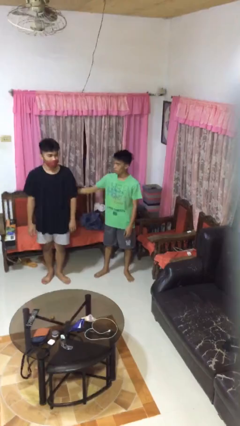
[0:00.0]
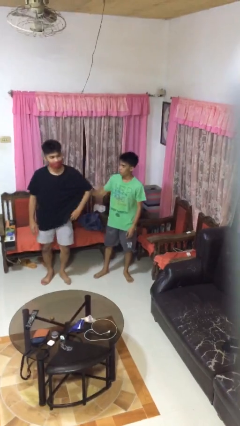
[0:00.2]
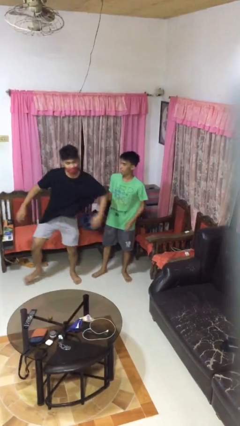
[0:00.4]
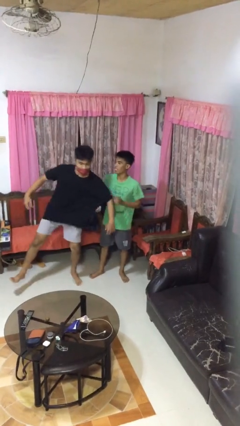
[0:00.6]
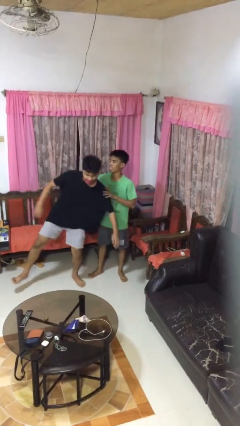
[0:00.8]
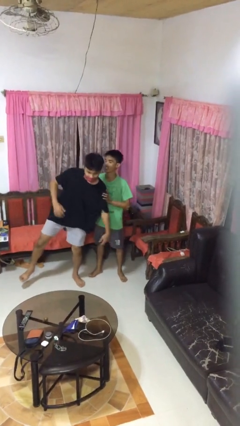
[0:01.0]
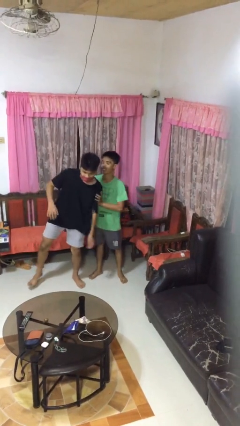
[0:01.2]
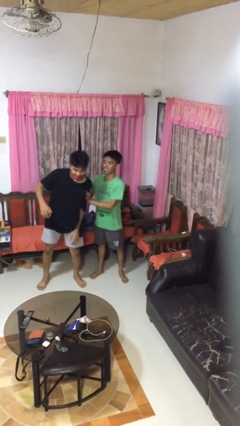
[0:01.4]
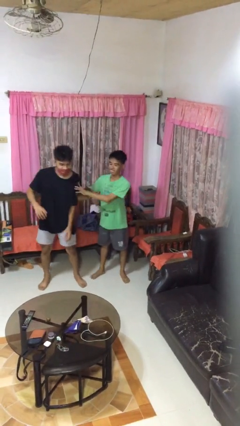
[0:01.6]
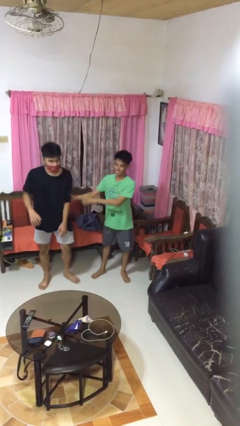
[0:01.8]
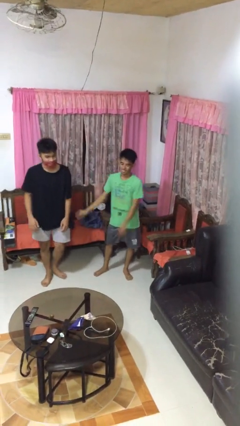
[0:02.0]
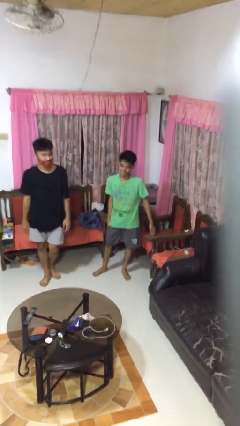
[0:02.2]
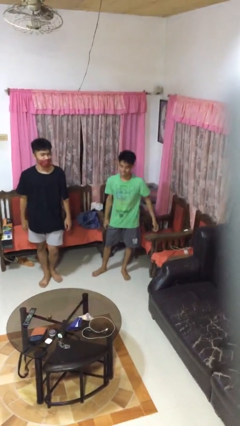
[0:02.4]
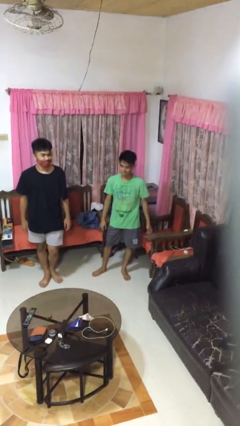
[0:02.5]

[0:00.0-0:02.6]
person grabs person by bicep

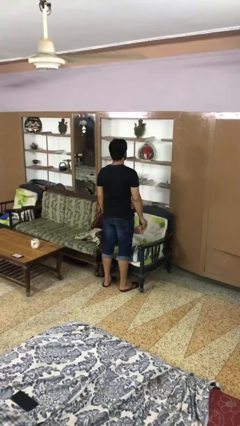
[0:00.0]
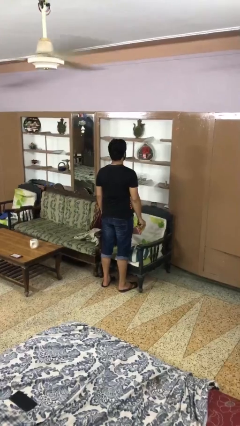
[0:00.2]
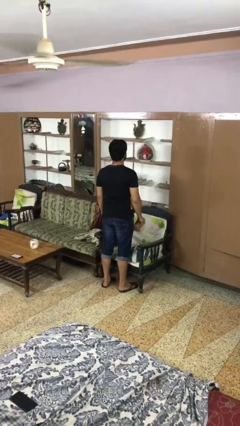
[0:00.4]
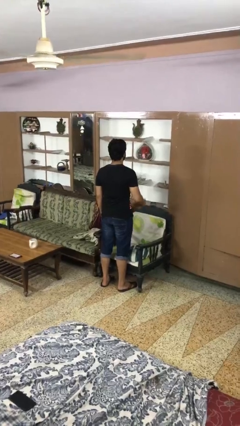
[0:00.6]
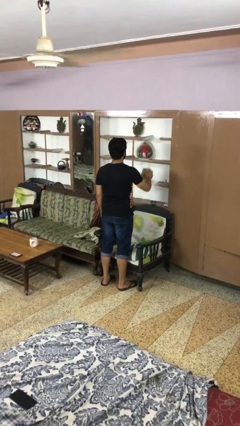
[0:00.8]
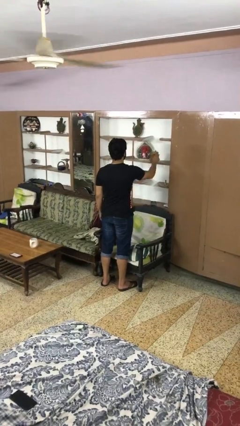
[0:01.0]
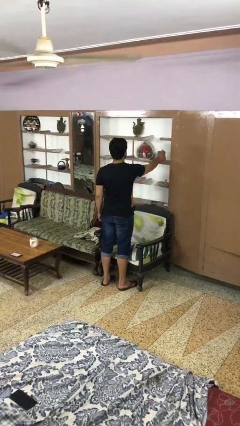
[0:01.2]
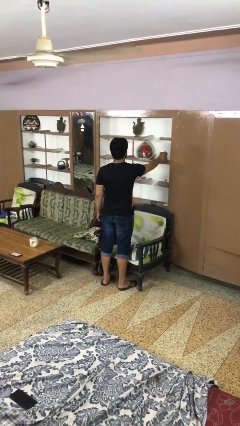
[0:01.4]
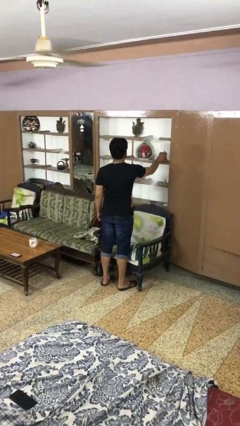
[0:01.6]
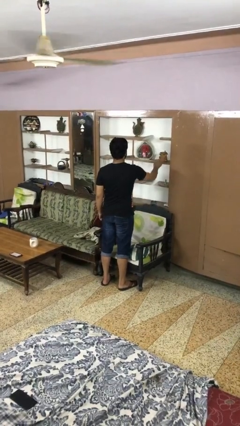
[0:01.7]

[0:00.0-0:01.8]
person puts down object on shelf

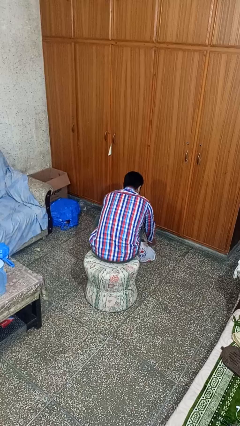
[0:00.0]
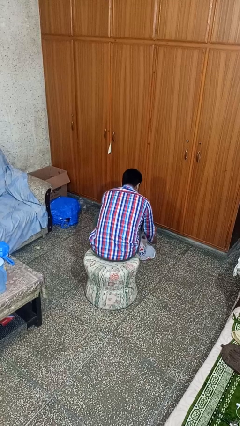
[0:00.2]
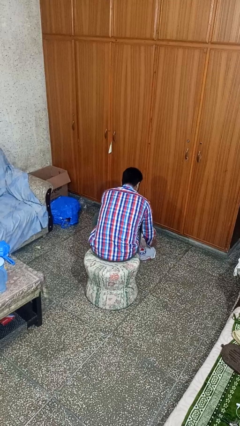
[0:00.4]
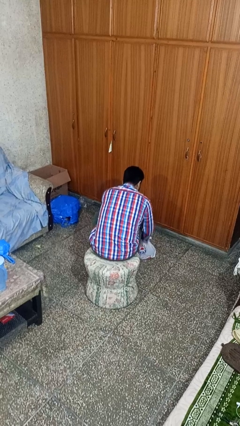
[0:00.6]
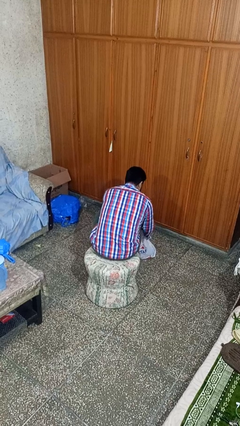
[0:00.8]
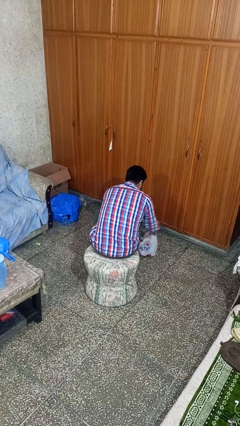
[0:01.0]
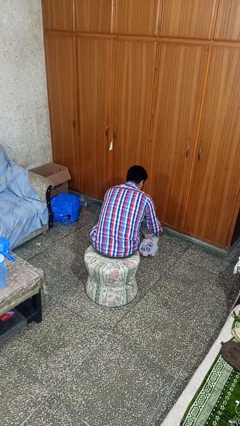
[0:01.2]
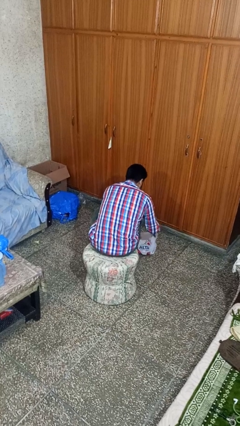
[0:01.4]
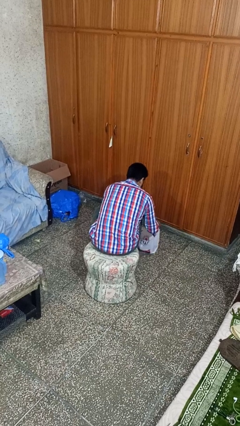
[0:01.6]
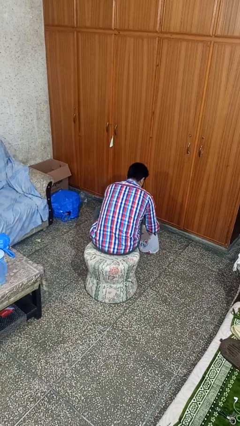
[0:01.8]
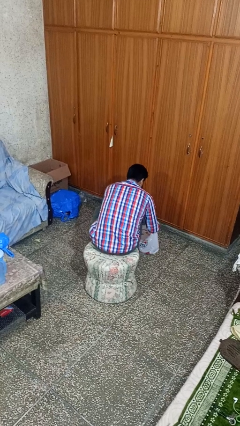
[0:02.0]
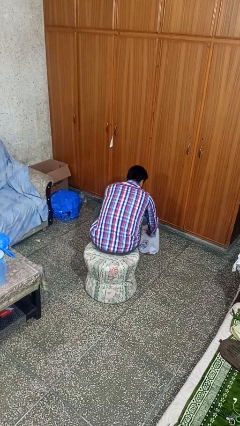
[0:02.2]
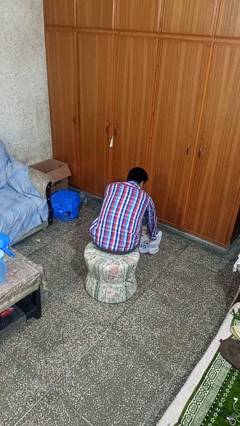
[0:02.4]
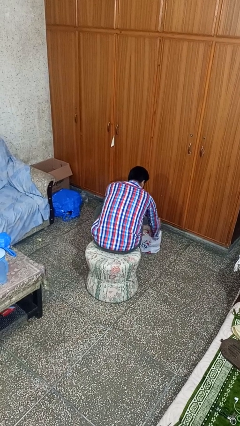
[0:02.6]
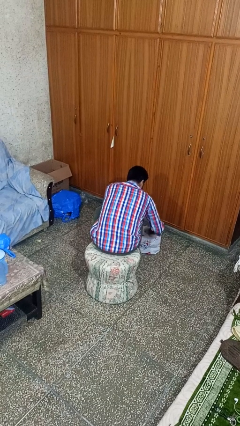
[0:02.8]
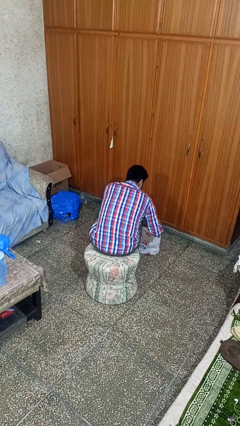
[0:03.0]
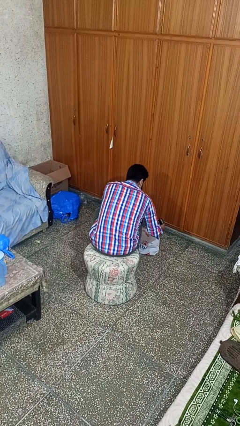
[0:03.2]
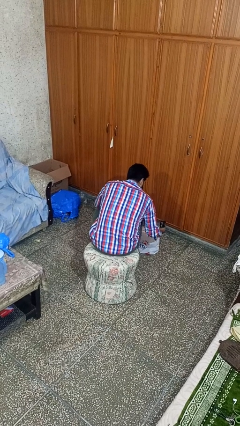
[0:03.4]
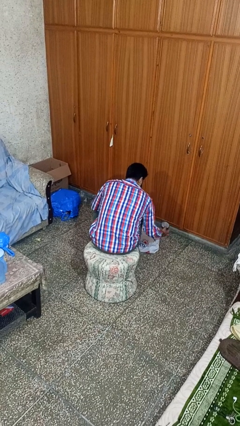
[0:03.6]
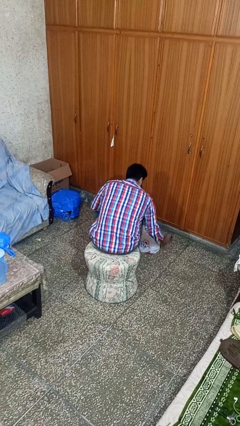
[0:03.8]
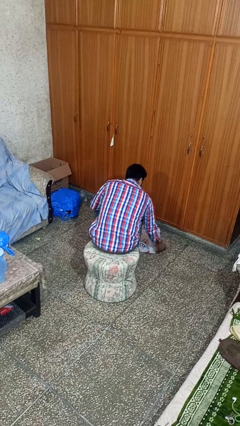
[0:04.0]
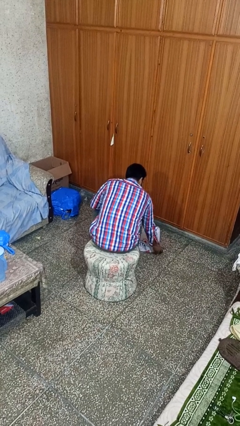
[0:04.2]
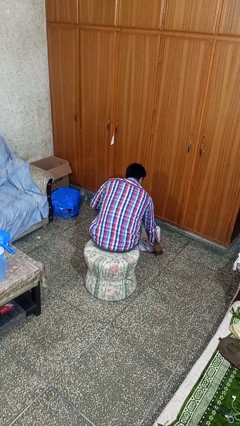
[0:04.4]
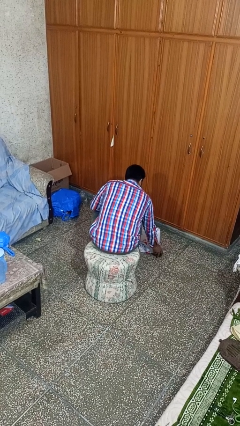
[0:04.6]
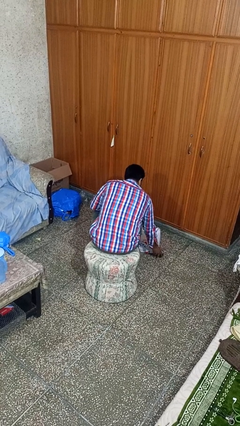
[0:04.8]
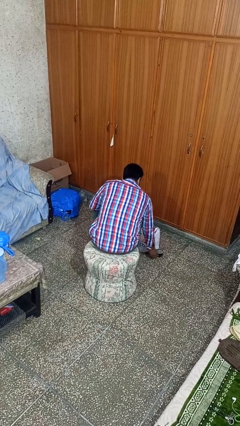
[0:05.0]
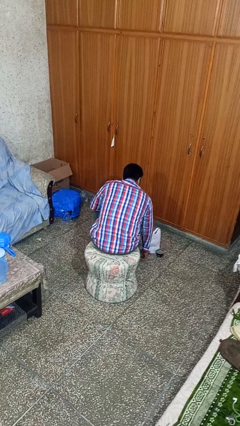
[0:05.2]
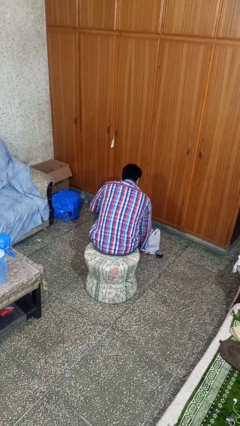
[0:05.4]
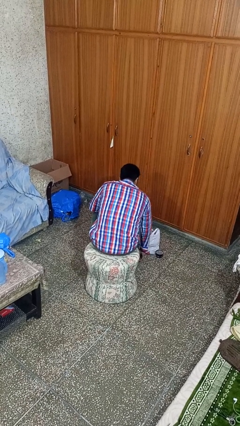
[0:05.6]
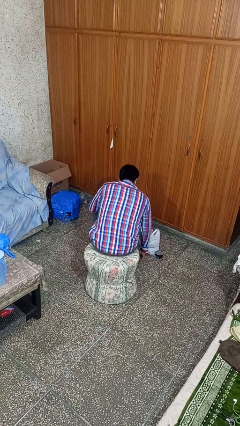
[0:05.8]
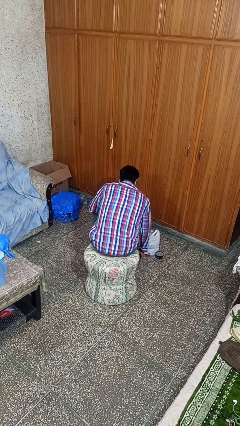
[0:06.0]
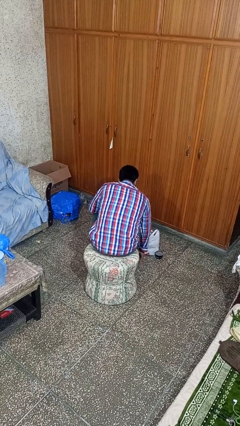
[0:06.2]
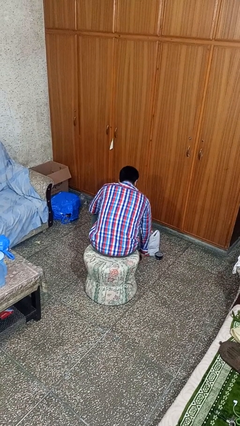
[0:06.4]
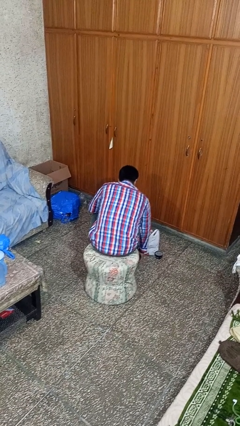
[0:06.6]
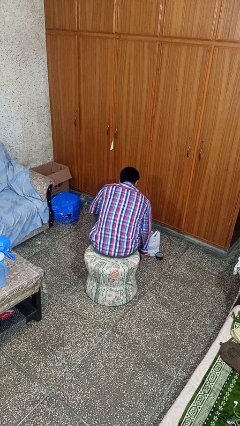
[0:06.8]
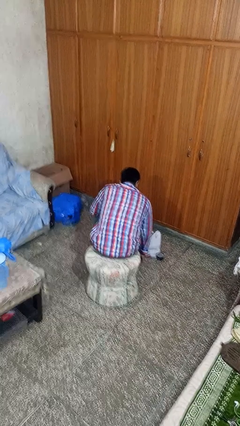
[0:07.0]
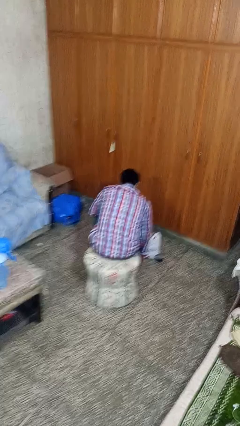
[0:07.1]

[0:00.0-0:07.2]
person takes object from bag

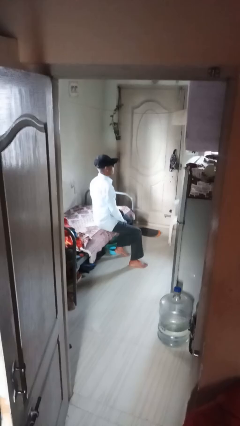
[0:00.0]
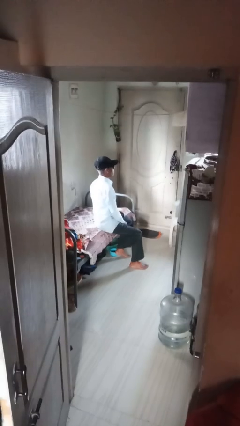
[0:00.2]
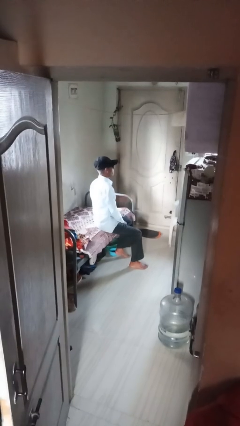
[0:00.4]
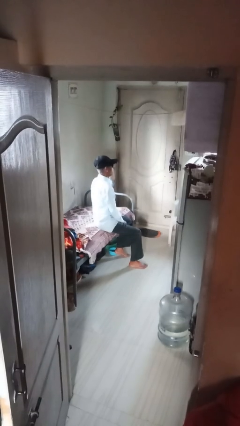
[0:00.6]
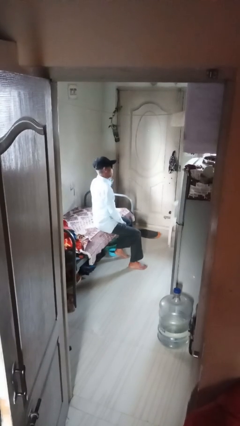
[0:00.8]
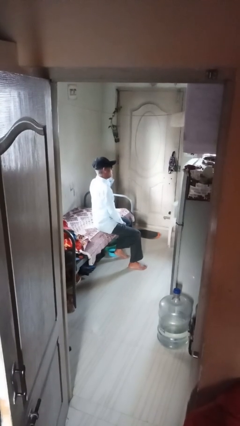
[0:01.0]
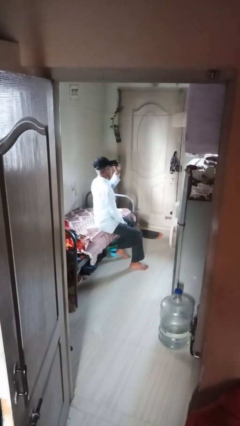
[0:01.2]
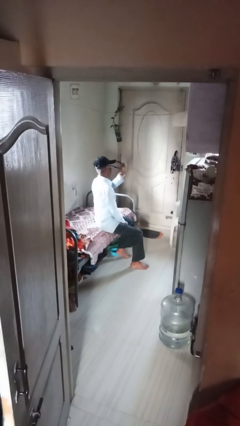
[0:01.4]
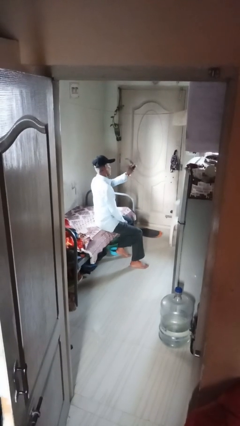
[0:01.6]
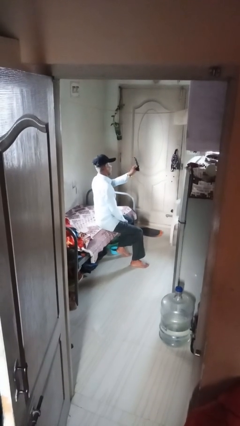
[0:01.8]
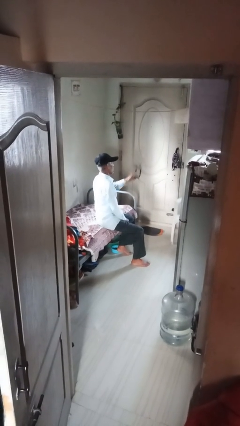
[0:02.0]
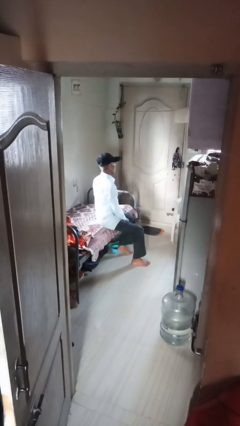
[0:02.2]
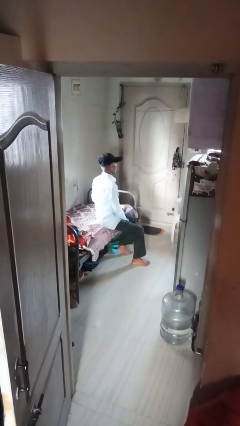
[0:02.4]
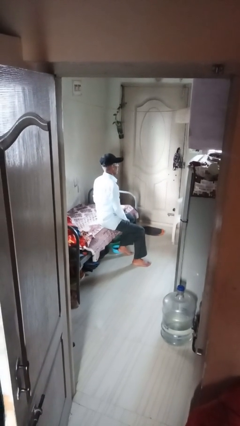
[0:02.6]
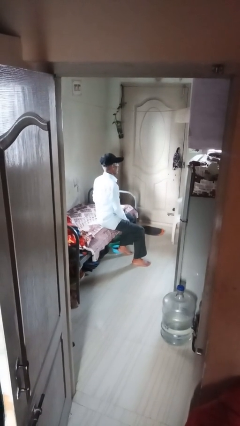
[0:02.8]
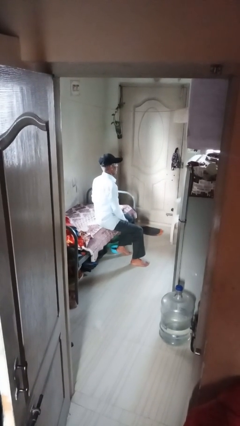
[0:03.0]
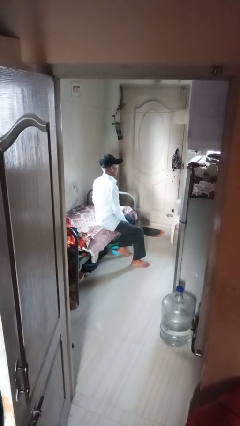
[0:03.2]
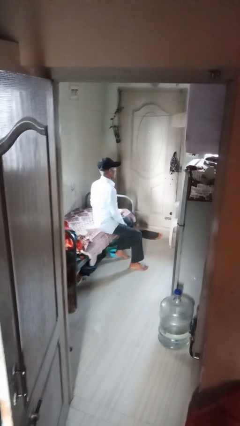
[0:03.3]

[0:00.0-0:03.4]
person takes off sunglasses

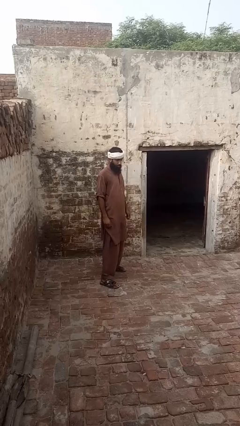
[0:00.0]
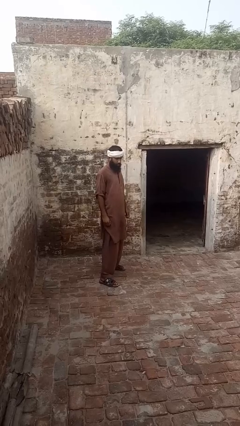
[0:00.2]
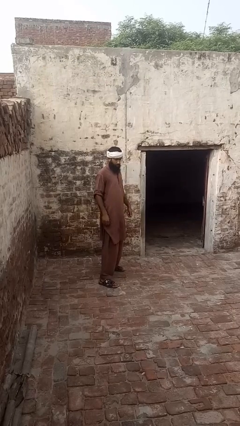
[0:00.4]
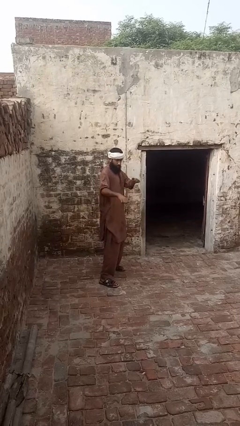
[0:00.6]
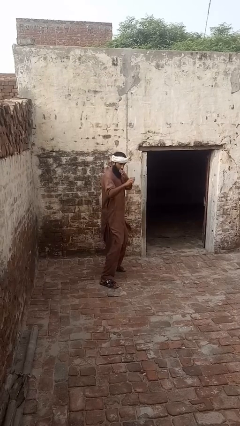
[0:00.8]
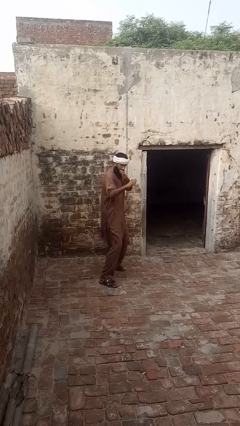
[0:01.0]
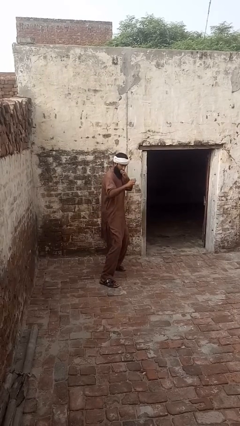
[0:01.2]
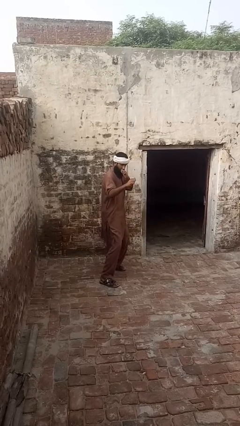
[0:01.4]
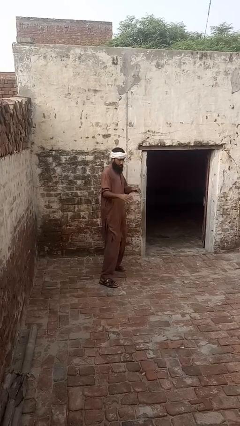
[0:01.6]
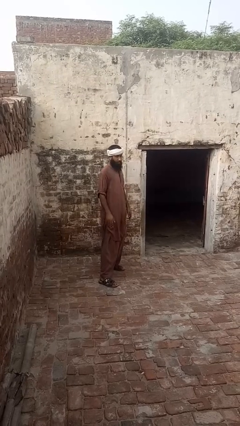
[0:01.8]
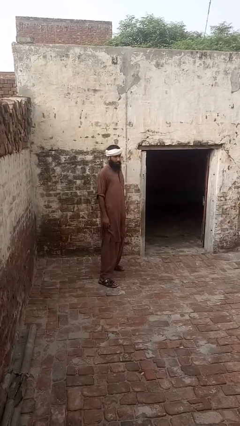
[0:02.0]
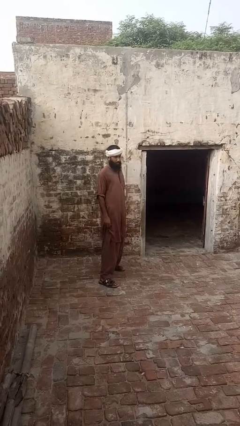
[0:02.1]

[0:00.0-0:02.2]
person karate chop

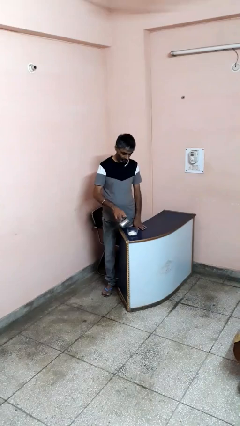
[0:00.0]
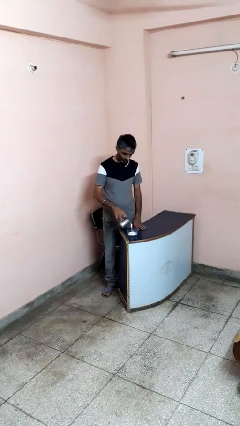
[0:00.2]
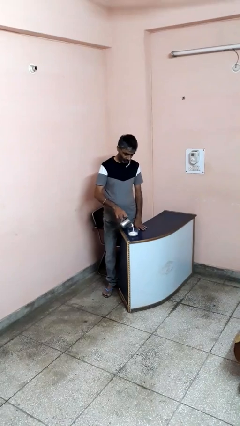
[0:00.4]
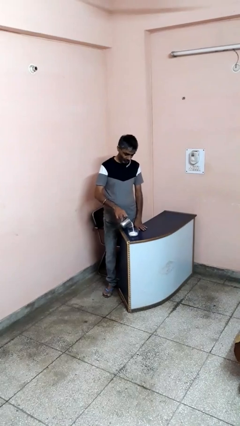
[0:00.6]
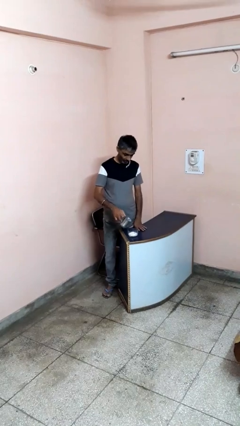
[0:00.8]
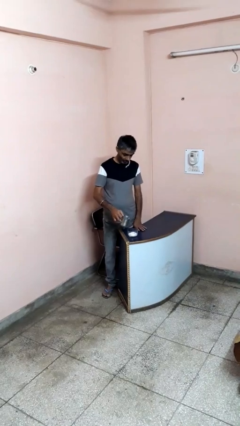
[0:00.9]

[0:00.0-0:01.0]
person pours into bowl
